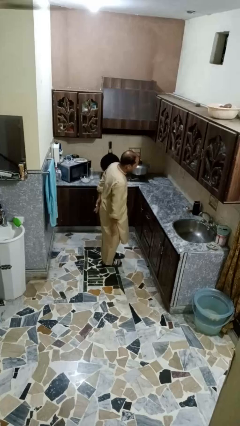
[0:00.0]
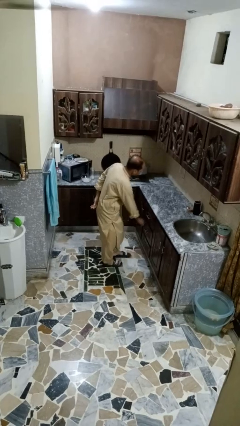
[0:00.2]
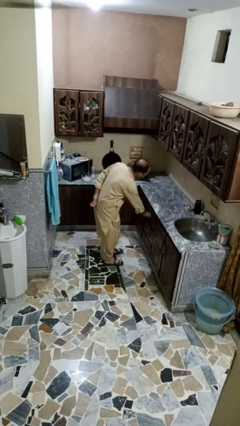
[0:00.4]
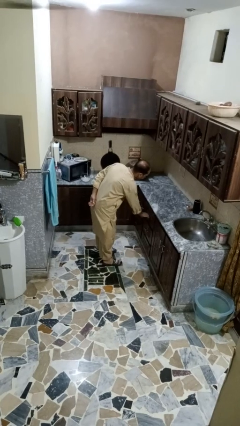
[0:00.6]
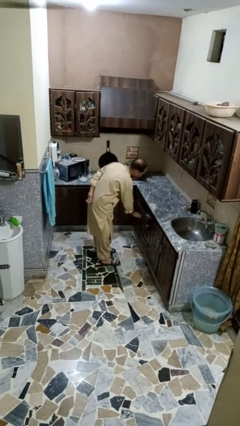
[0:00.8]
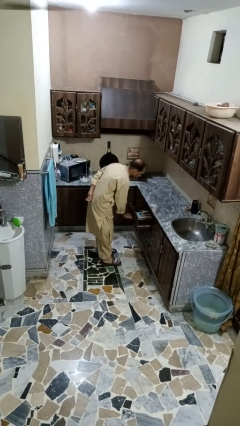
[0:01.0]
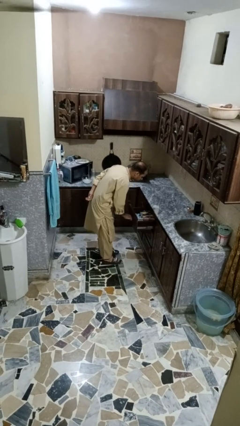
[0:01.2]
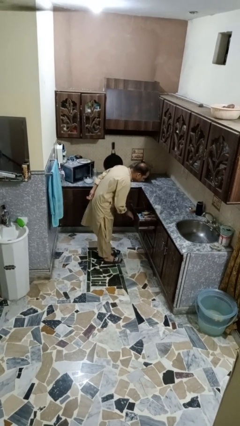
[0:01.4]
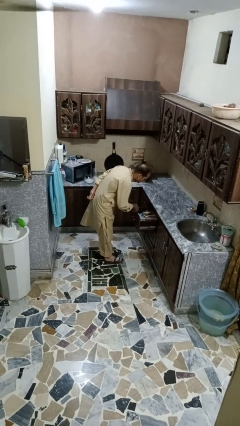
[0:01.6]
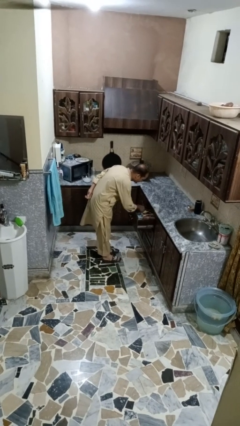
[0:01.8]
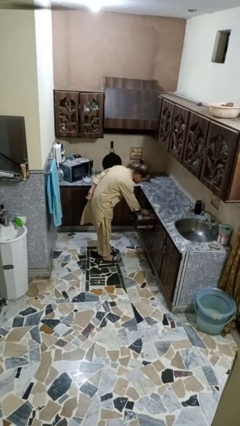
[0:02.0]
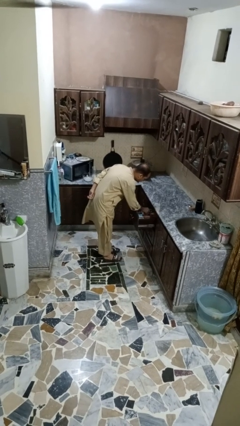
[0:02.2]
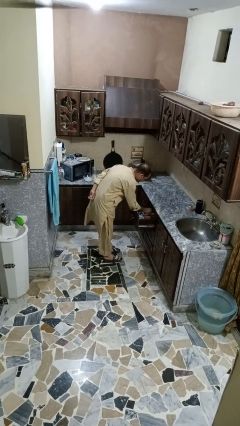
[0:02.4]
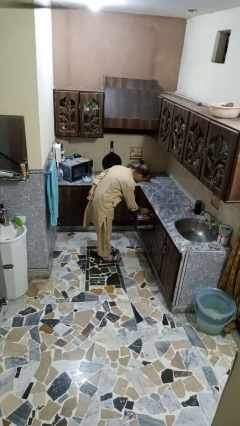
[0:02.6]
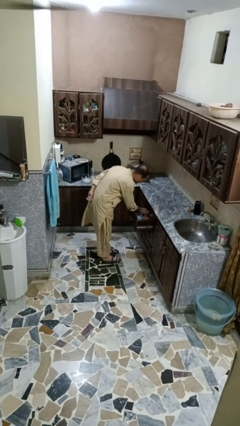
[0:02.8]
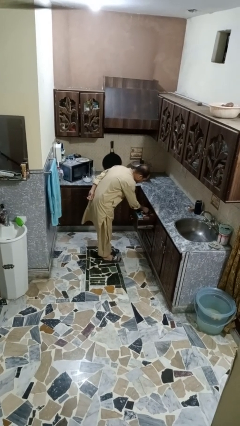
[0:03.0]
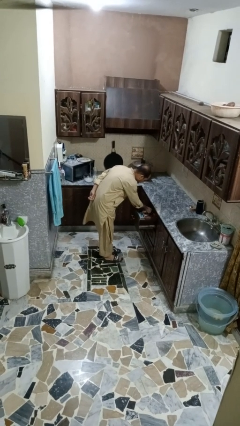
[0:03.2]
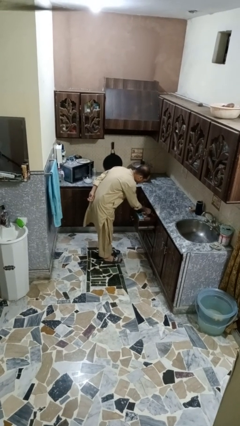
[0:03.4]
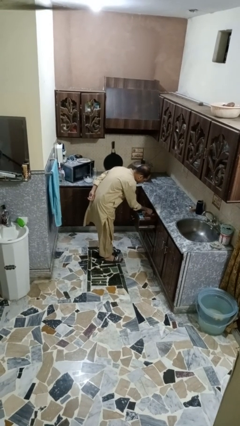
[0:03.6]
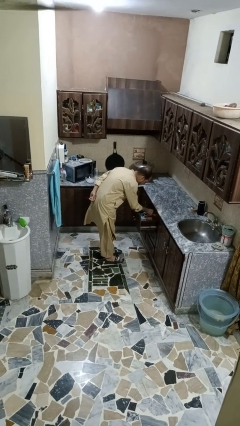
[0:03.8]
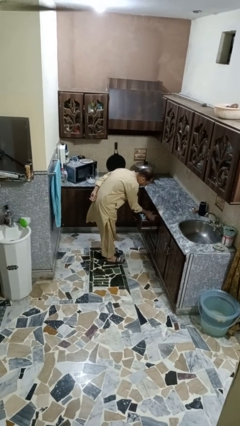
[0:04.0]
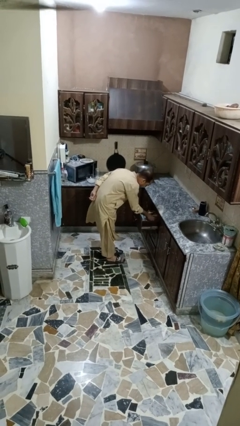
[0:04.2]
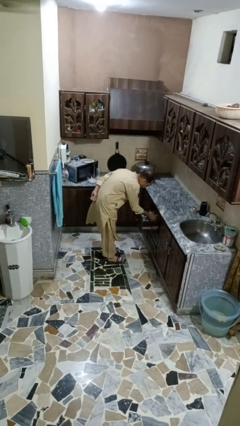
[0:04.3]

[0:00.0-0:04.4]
person searches in kitchen drawer

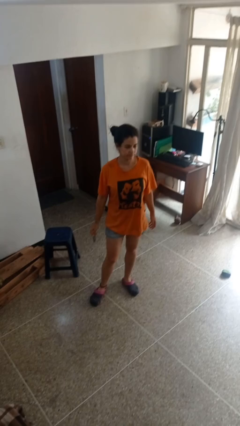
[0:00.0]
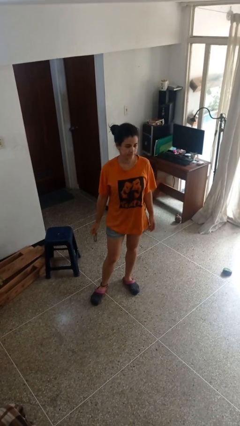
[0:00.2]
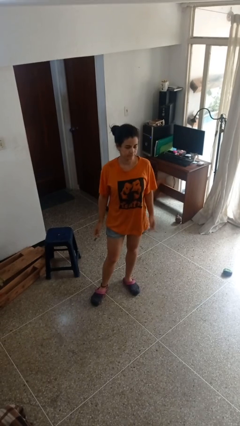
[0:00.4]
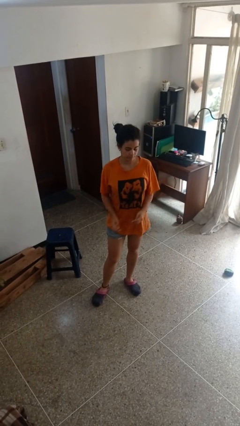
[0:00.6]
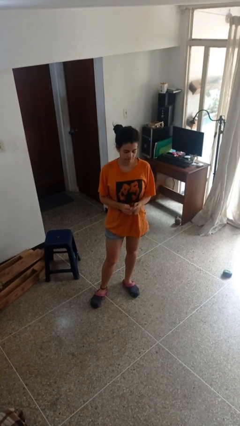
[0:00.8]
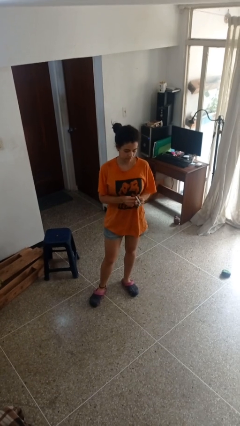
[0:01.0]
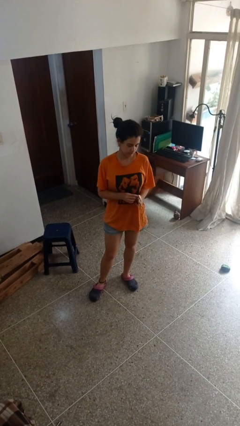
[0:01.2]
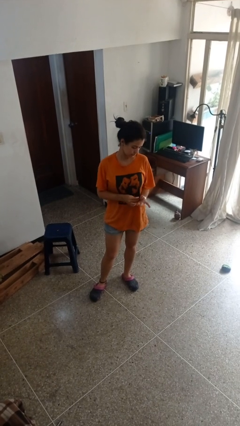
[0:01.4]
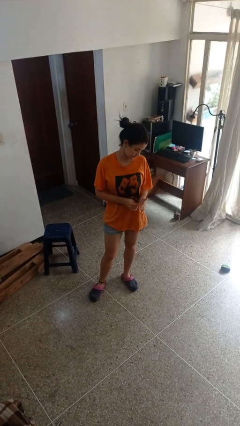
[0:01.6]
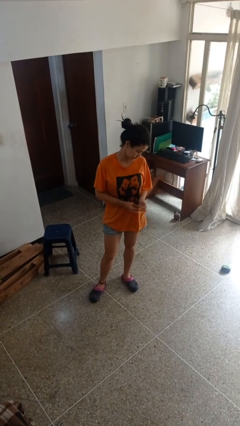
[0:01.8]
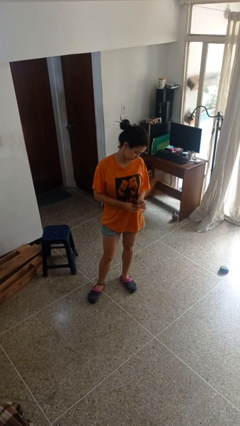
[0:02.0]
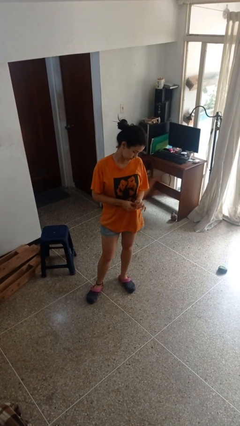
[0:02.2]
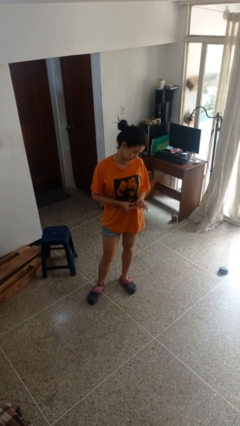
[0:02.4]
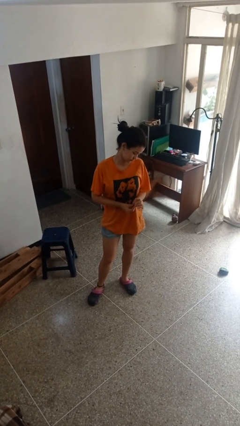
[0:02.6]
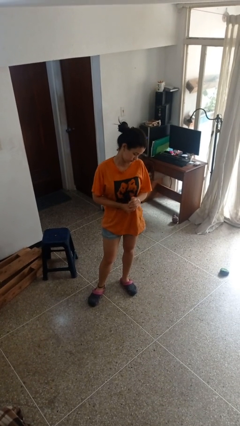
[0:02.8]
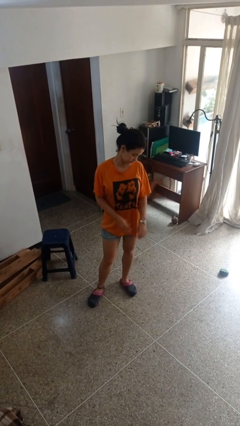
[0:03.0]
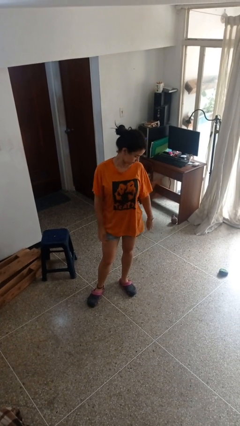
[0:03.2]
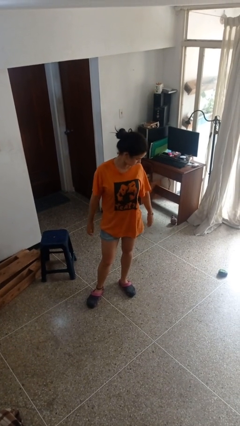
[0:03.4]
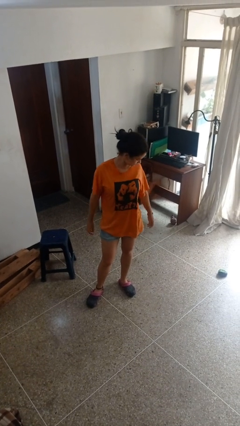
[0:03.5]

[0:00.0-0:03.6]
person puts on wristwatch

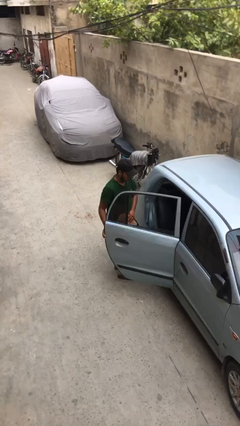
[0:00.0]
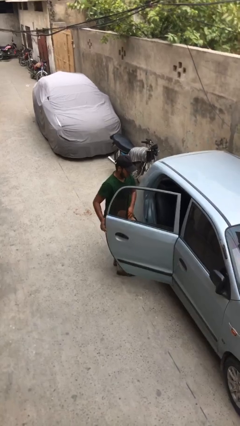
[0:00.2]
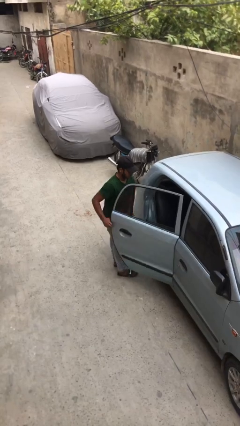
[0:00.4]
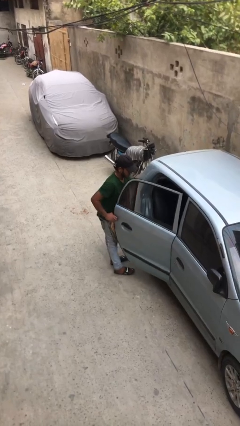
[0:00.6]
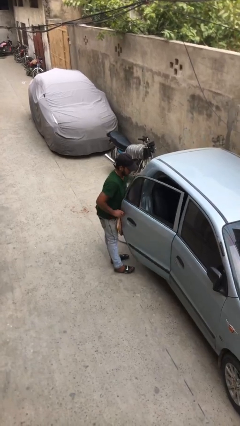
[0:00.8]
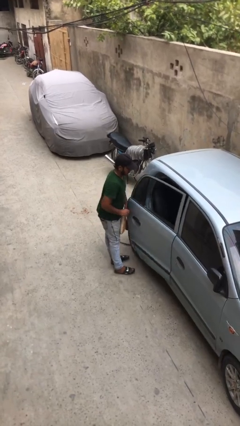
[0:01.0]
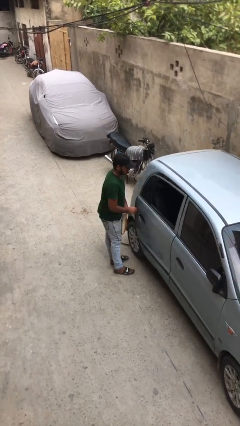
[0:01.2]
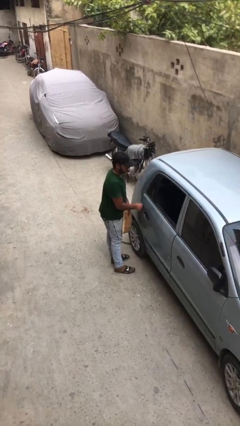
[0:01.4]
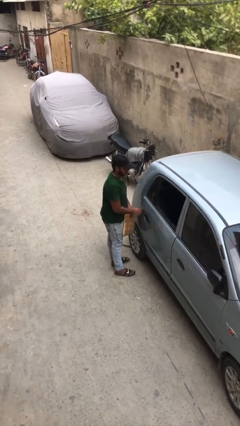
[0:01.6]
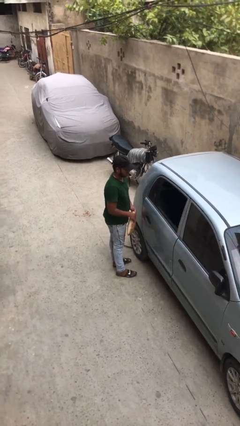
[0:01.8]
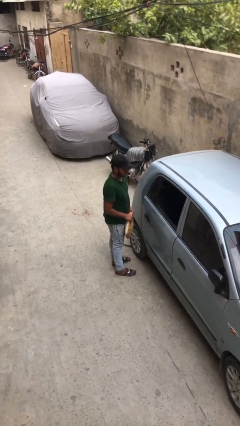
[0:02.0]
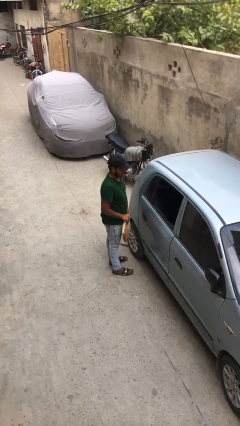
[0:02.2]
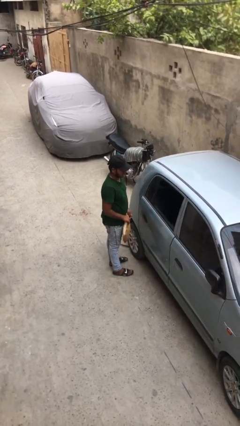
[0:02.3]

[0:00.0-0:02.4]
person closes car door

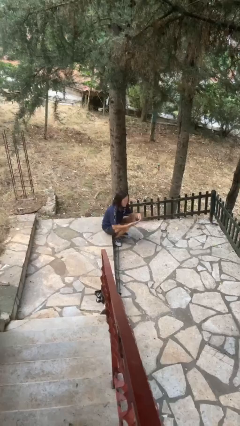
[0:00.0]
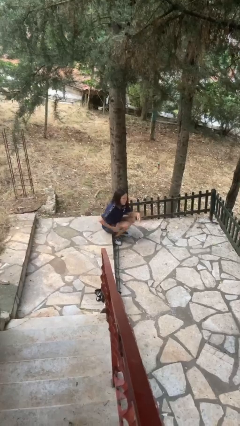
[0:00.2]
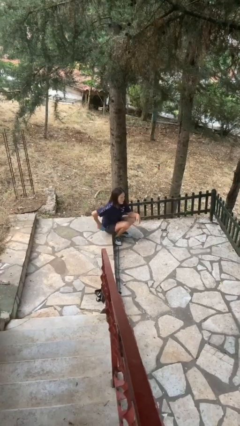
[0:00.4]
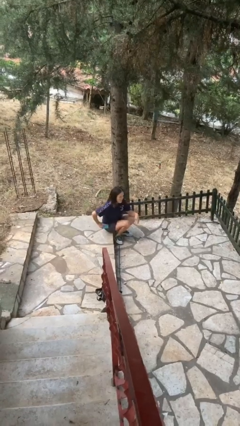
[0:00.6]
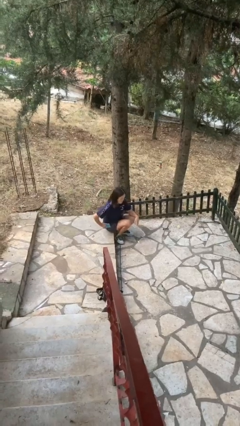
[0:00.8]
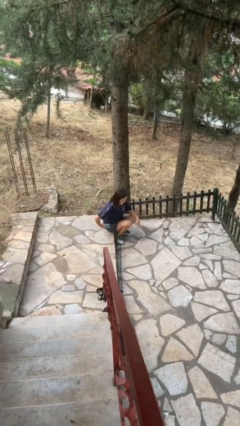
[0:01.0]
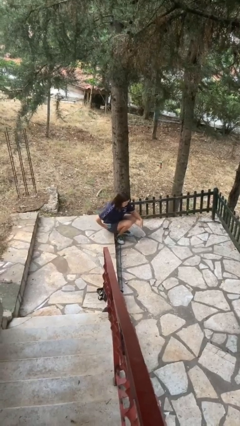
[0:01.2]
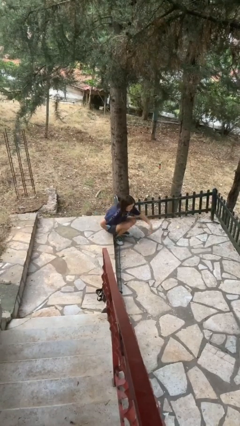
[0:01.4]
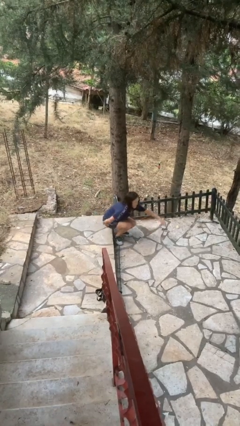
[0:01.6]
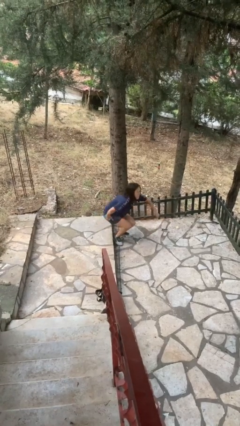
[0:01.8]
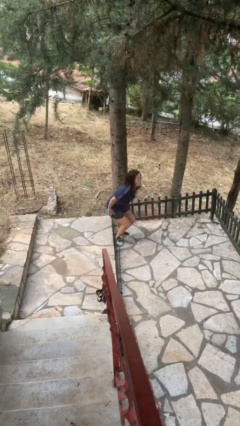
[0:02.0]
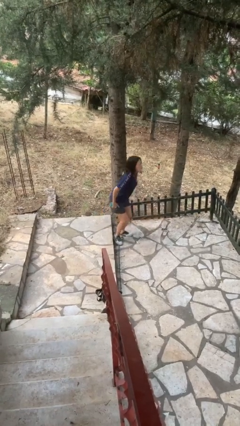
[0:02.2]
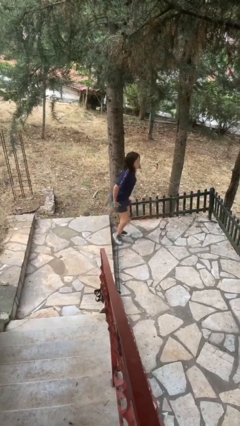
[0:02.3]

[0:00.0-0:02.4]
person puts phone into pocket

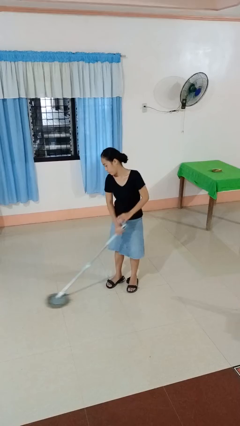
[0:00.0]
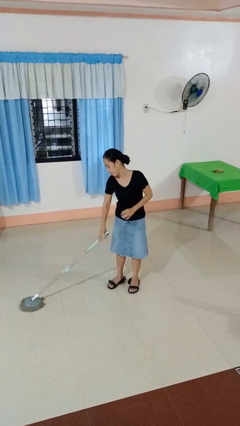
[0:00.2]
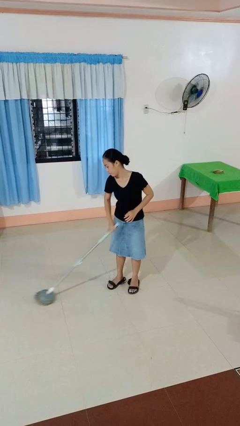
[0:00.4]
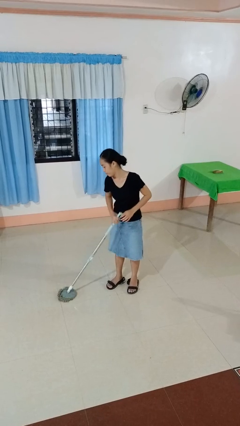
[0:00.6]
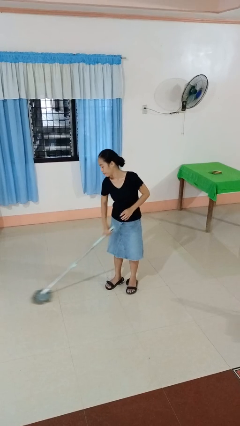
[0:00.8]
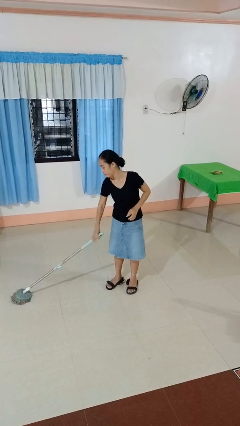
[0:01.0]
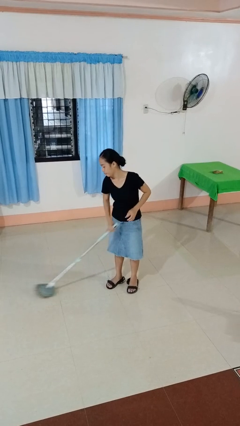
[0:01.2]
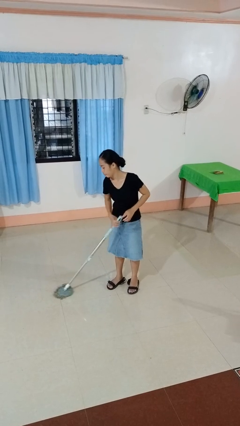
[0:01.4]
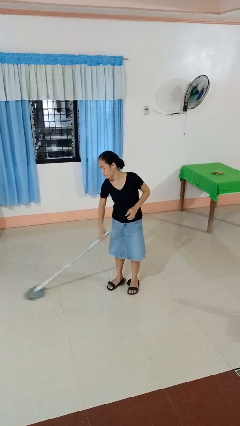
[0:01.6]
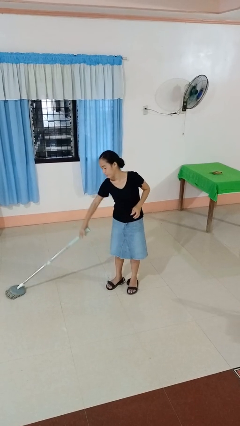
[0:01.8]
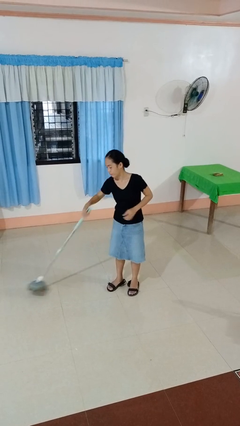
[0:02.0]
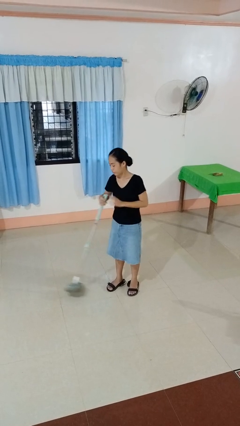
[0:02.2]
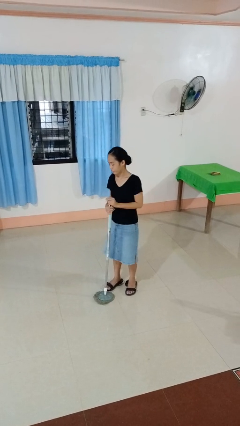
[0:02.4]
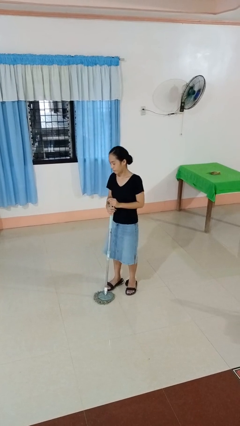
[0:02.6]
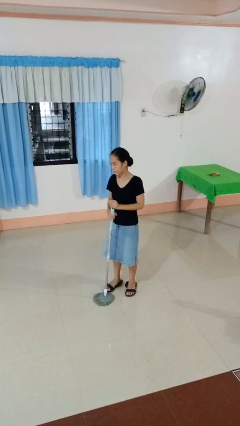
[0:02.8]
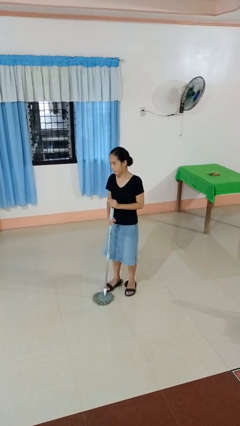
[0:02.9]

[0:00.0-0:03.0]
person mops

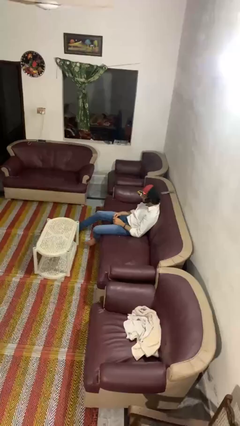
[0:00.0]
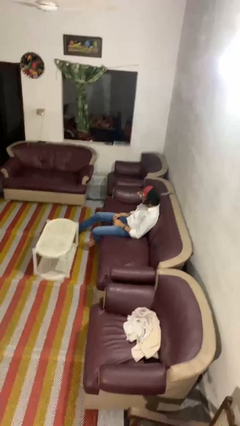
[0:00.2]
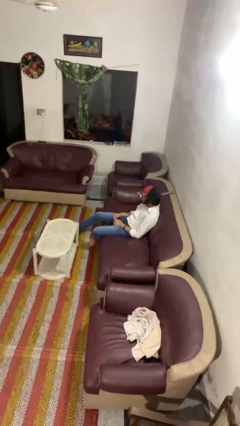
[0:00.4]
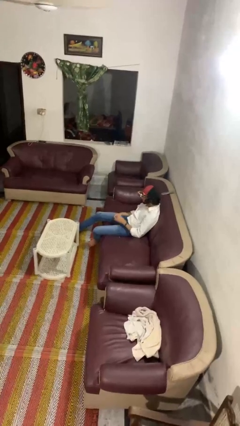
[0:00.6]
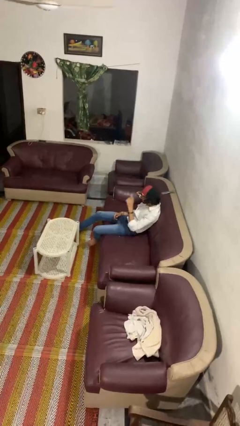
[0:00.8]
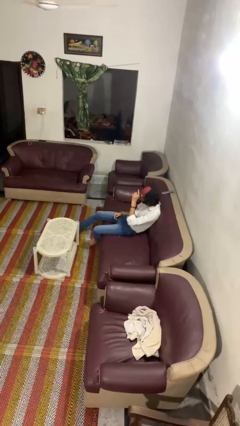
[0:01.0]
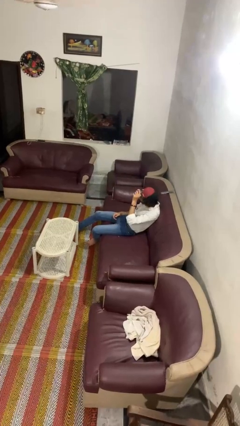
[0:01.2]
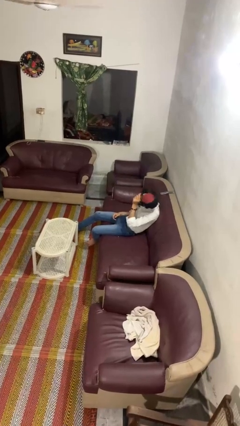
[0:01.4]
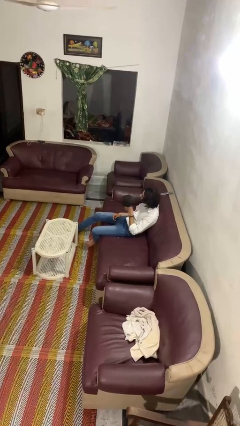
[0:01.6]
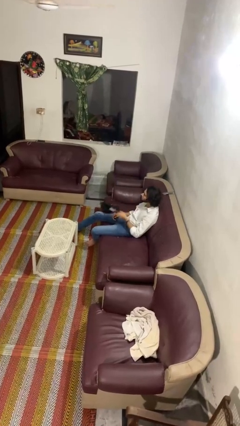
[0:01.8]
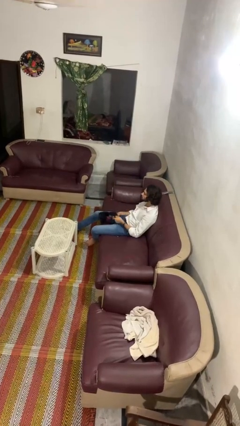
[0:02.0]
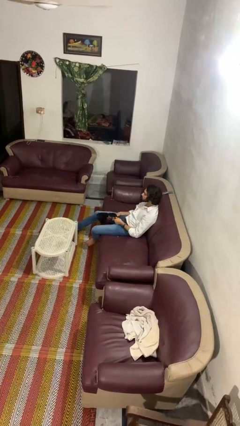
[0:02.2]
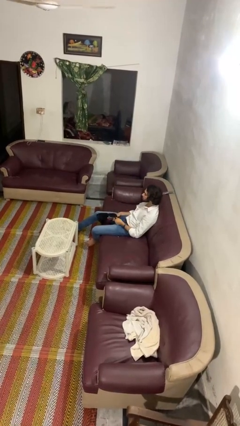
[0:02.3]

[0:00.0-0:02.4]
person takes off hat
